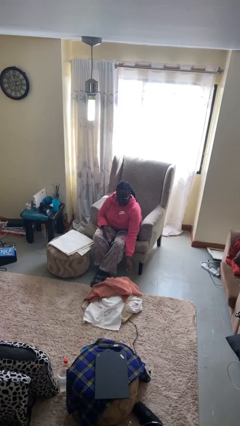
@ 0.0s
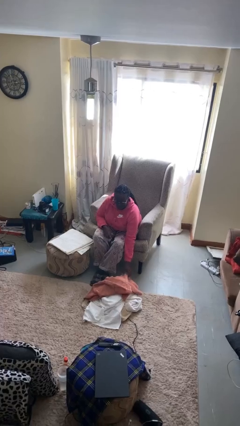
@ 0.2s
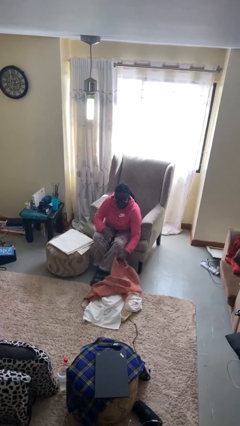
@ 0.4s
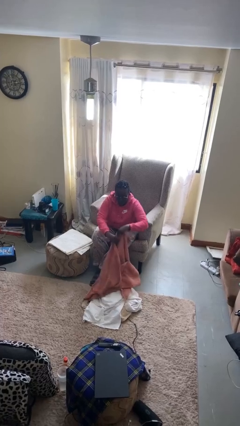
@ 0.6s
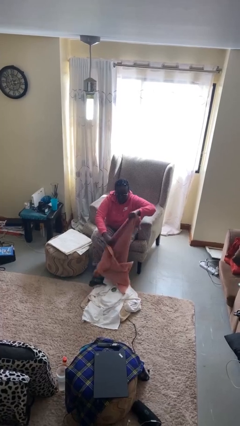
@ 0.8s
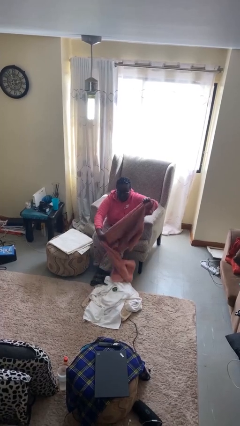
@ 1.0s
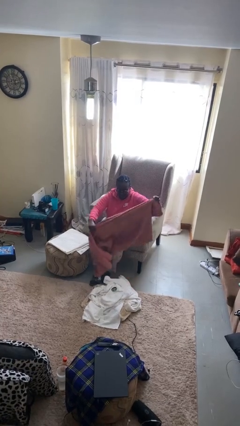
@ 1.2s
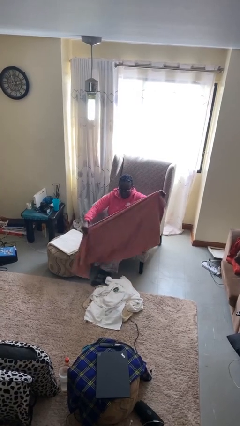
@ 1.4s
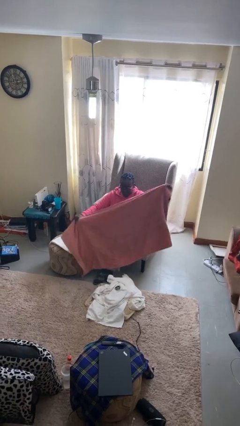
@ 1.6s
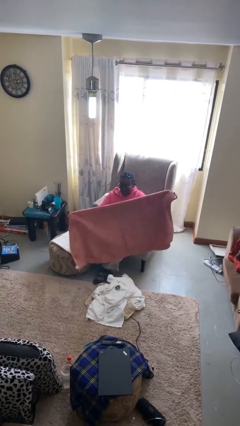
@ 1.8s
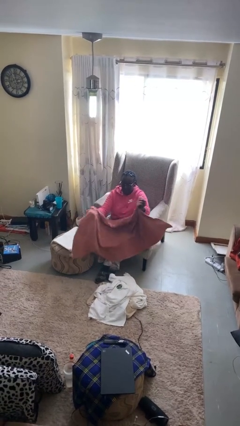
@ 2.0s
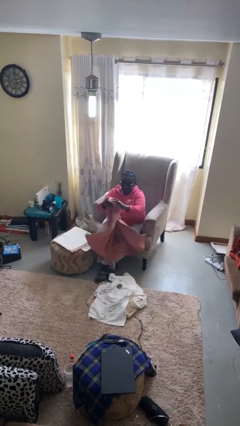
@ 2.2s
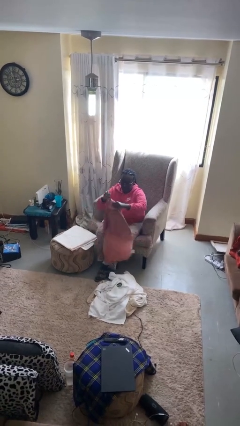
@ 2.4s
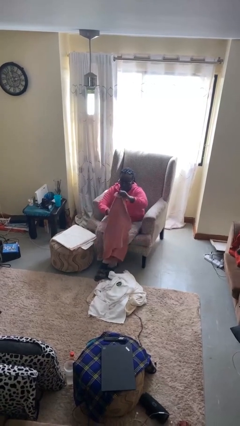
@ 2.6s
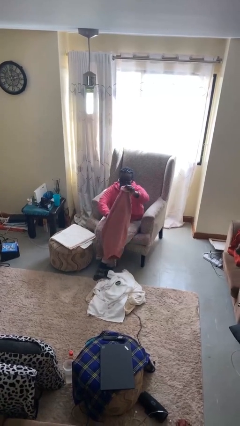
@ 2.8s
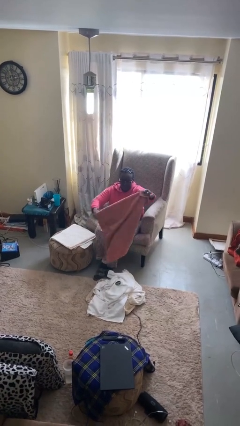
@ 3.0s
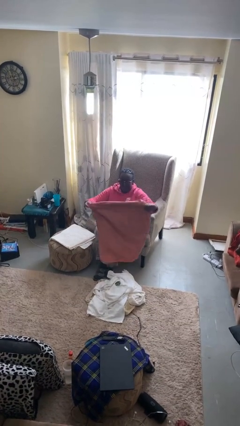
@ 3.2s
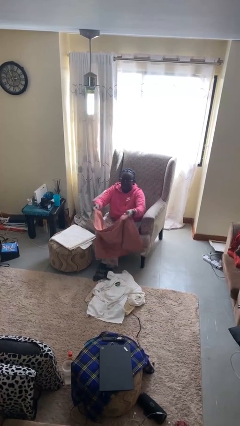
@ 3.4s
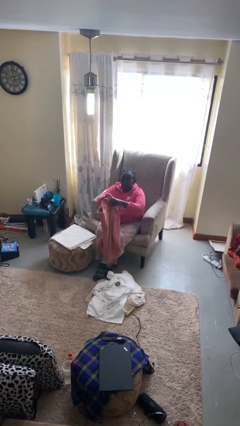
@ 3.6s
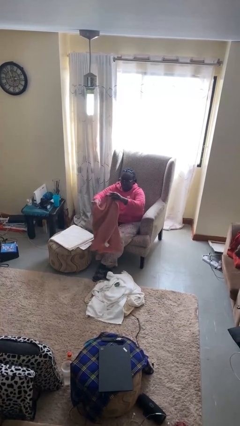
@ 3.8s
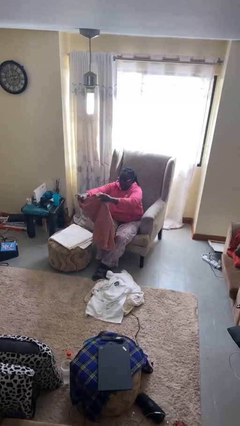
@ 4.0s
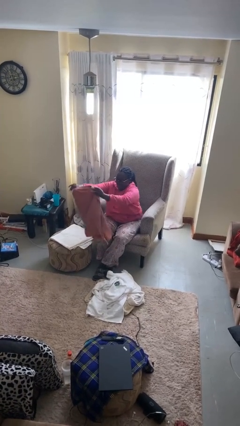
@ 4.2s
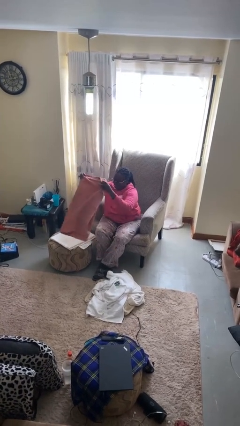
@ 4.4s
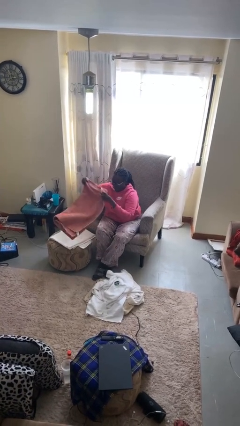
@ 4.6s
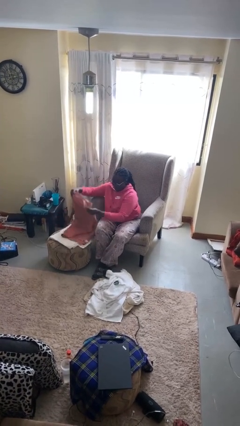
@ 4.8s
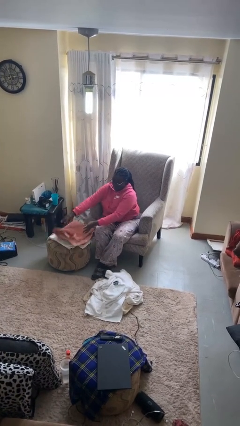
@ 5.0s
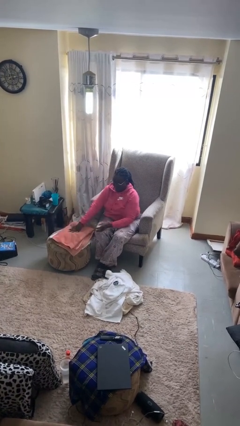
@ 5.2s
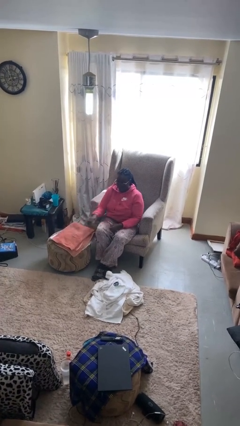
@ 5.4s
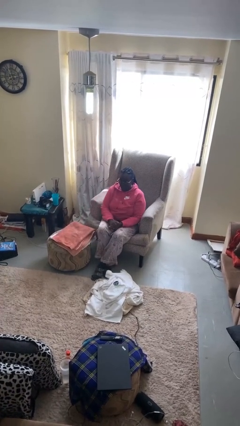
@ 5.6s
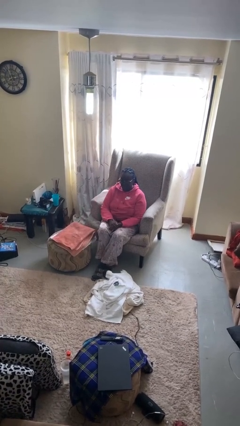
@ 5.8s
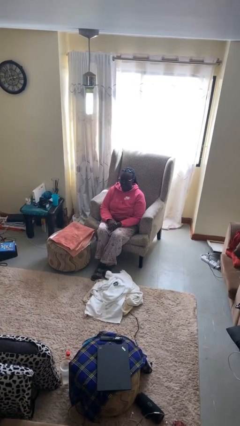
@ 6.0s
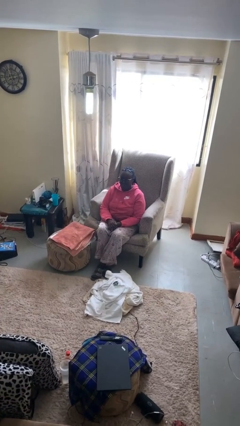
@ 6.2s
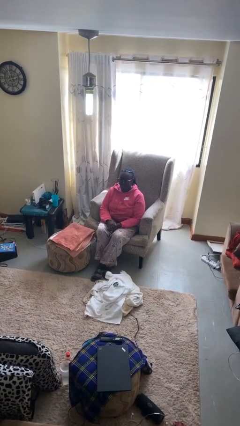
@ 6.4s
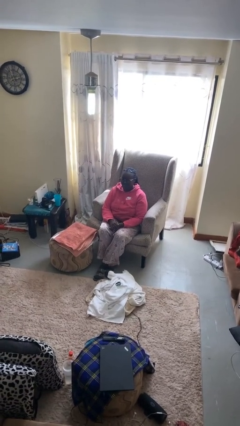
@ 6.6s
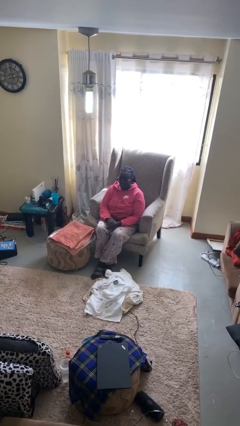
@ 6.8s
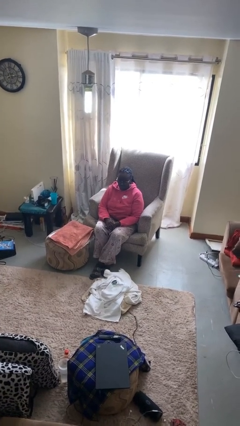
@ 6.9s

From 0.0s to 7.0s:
person folds towel

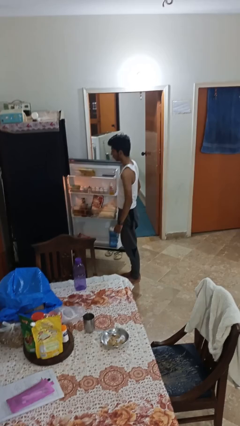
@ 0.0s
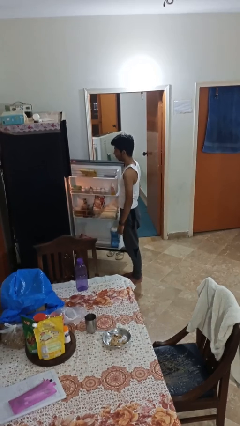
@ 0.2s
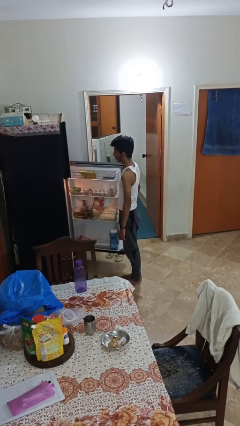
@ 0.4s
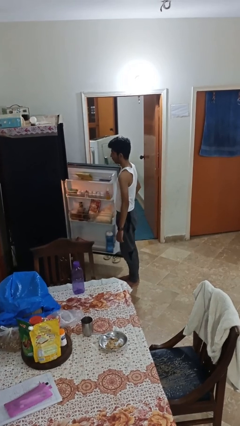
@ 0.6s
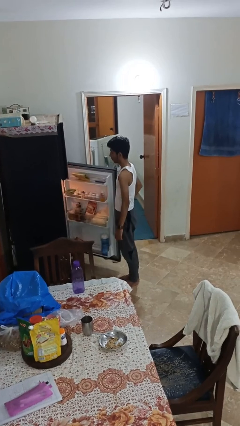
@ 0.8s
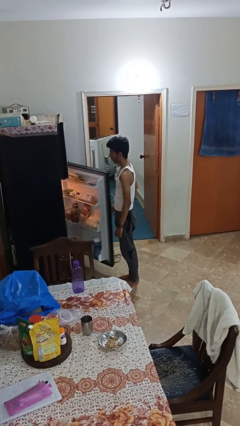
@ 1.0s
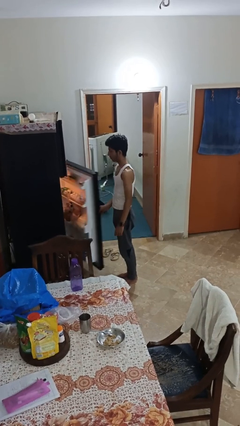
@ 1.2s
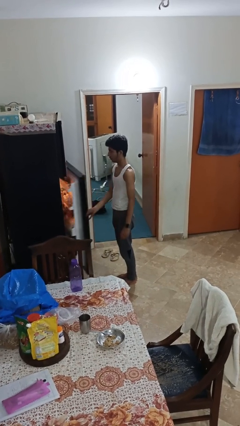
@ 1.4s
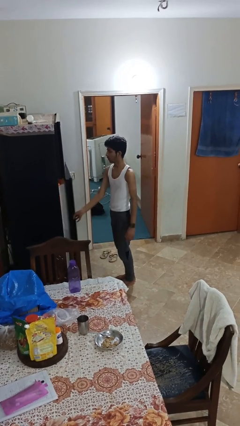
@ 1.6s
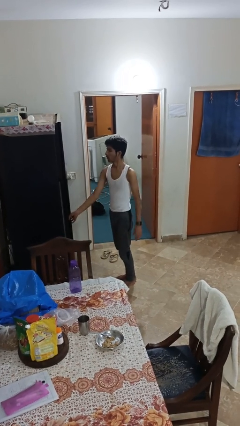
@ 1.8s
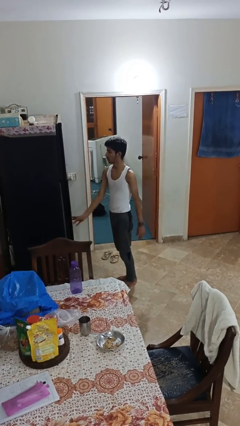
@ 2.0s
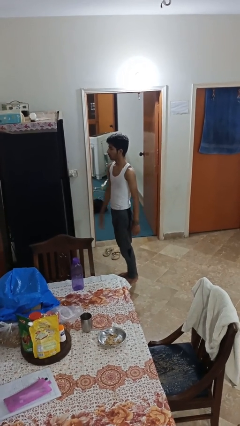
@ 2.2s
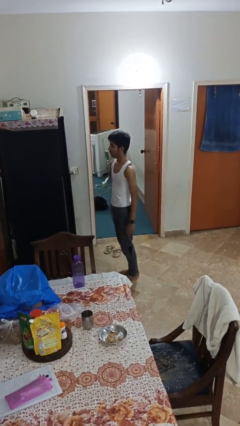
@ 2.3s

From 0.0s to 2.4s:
person closes refrigerator

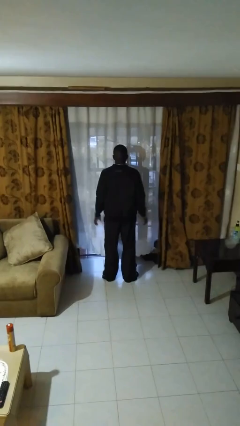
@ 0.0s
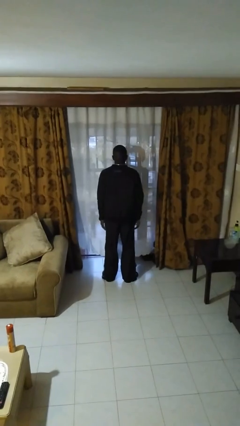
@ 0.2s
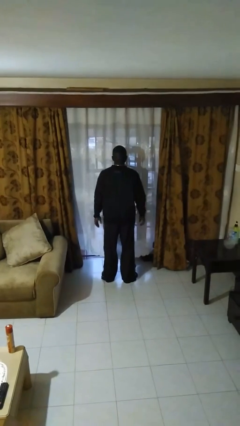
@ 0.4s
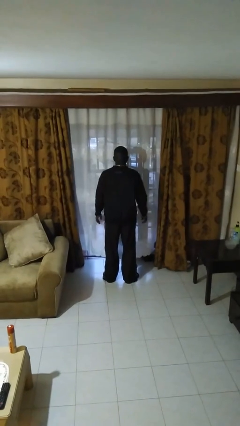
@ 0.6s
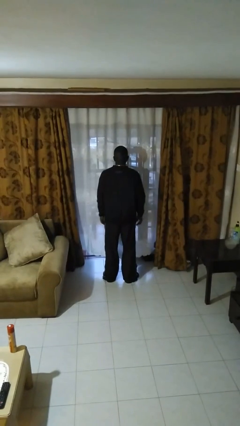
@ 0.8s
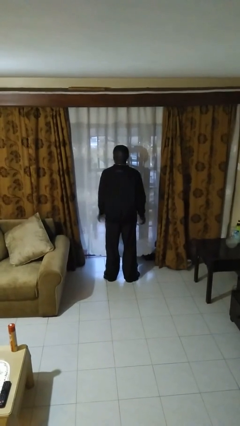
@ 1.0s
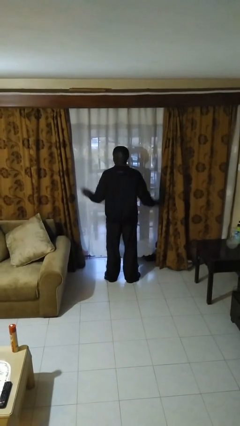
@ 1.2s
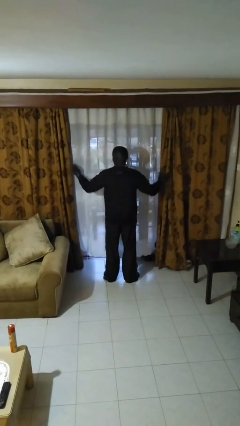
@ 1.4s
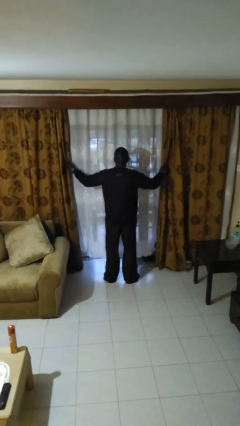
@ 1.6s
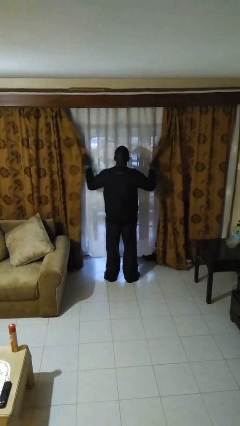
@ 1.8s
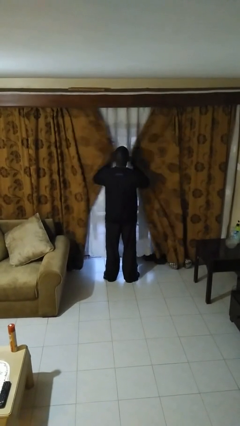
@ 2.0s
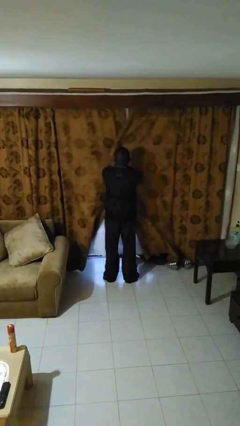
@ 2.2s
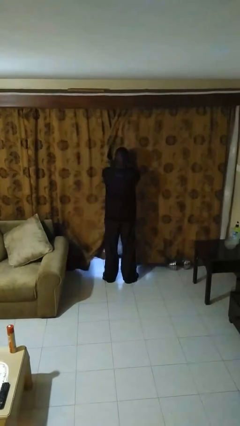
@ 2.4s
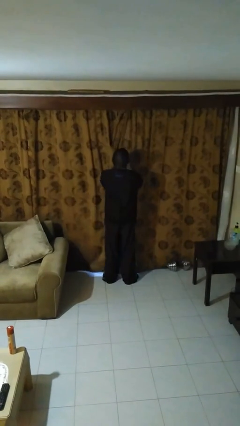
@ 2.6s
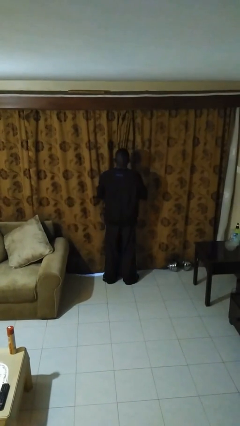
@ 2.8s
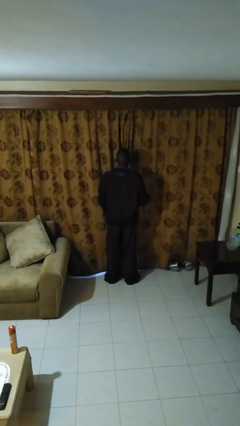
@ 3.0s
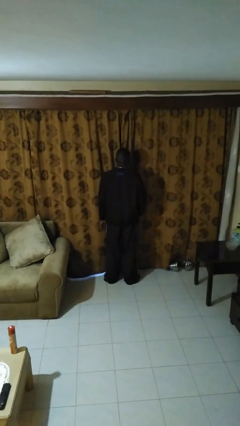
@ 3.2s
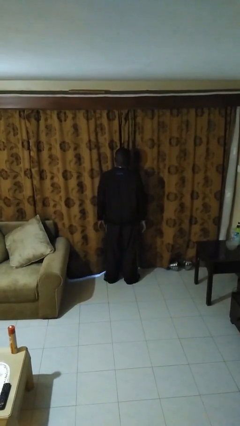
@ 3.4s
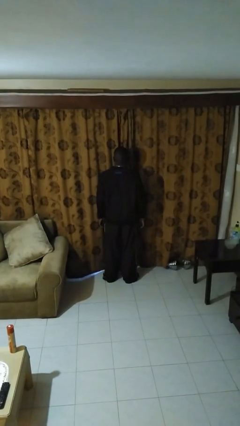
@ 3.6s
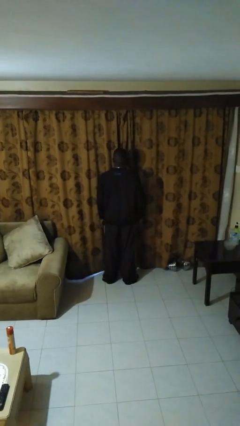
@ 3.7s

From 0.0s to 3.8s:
person closes curtains

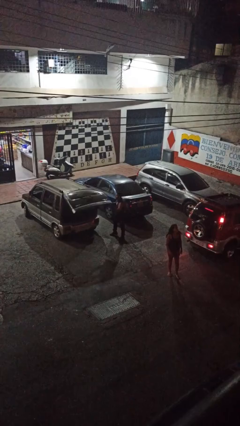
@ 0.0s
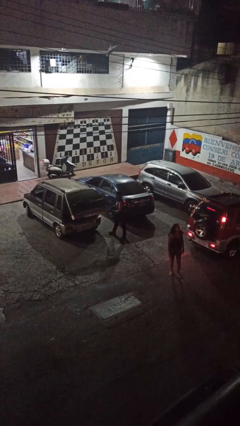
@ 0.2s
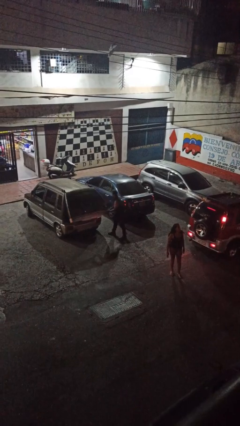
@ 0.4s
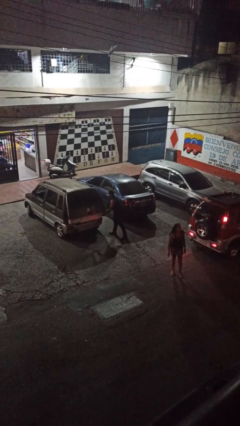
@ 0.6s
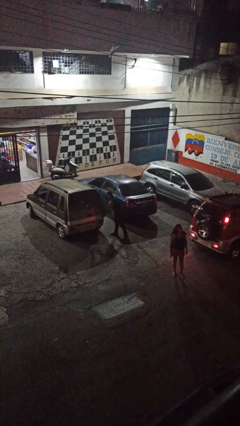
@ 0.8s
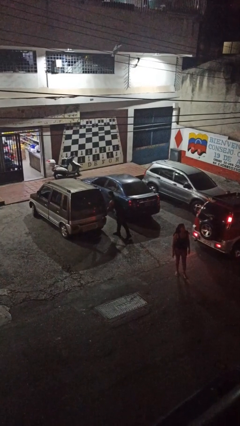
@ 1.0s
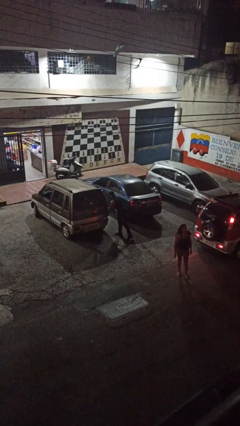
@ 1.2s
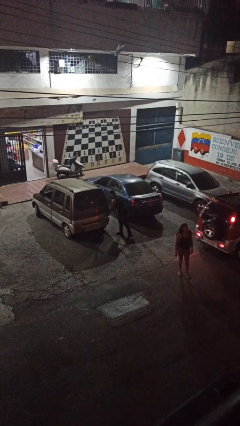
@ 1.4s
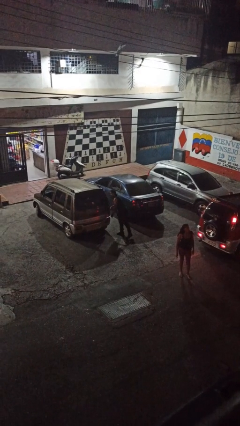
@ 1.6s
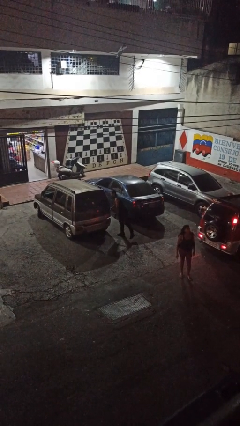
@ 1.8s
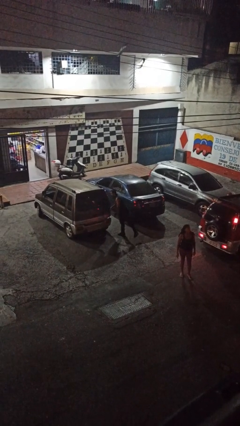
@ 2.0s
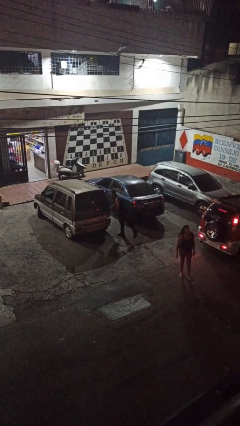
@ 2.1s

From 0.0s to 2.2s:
person closes car trunk

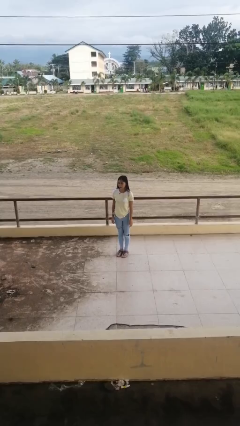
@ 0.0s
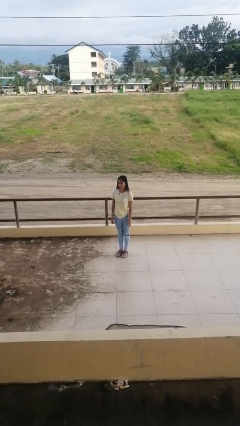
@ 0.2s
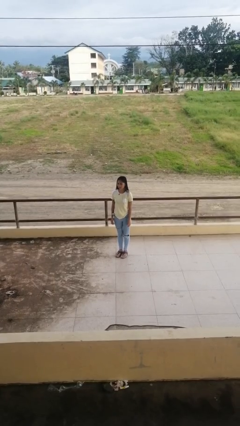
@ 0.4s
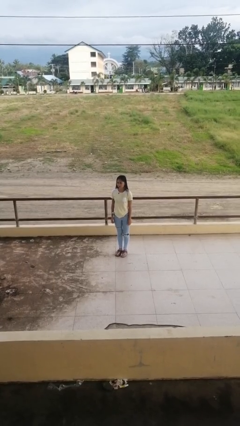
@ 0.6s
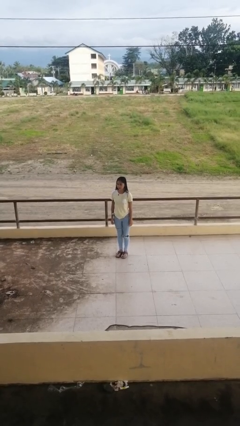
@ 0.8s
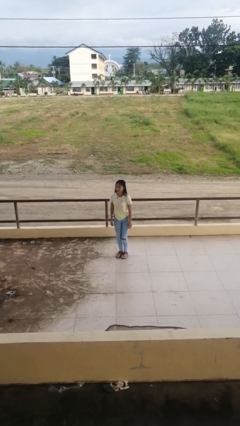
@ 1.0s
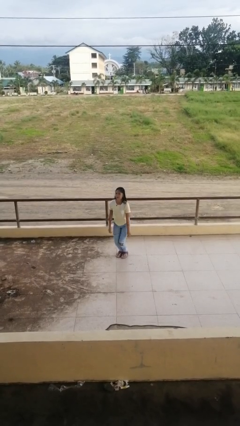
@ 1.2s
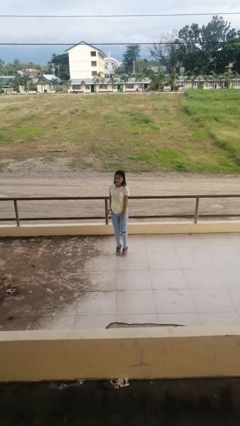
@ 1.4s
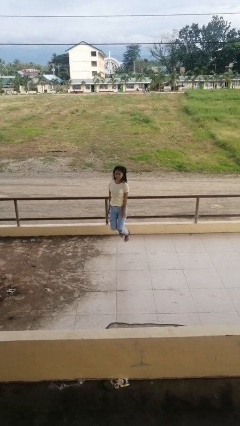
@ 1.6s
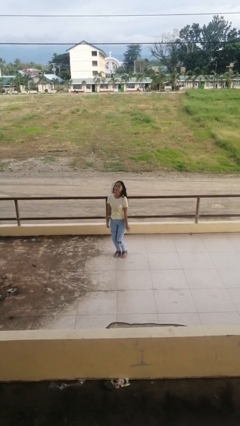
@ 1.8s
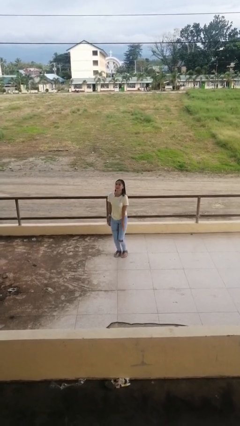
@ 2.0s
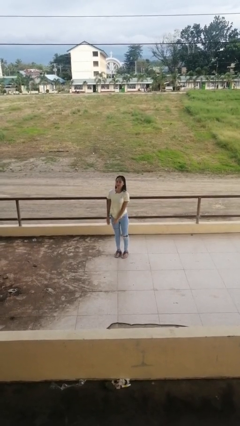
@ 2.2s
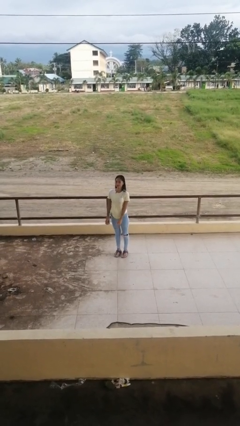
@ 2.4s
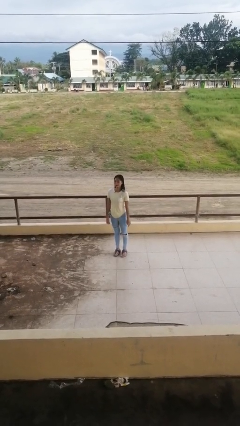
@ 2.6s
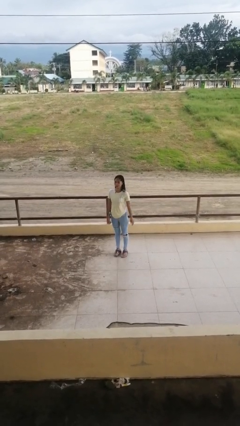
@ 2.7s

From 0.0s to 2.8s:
person jumps
